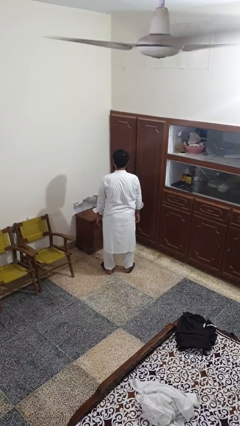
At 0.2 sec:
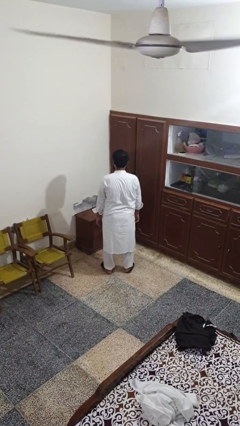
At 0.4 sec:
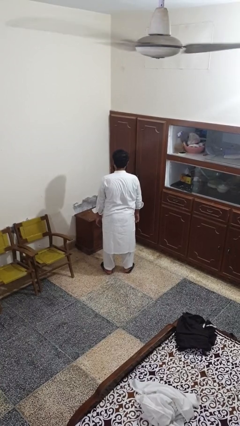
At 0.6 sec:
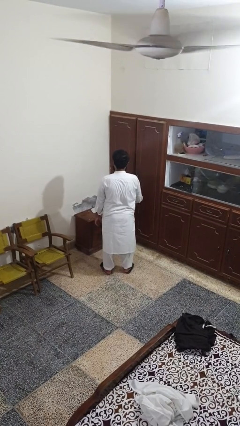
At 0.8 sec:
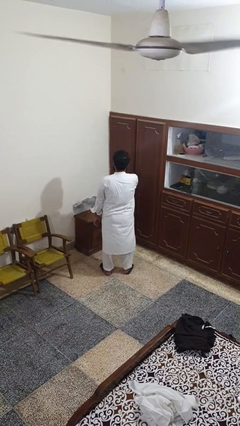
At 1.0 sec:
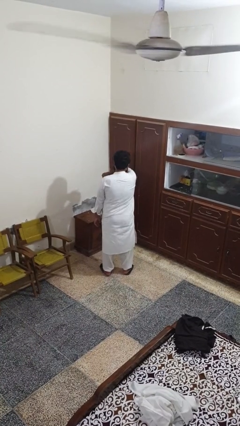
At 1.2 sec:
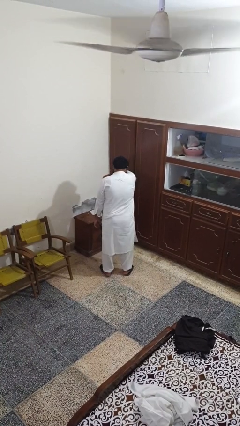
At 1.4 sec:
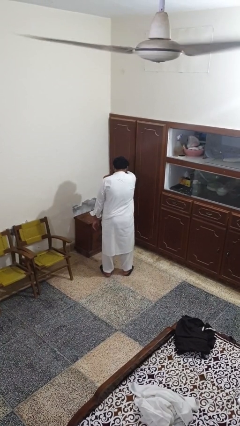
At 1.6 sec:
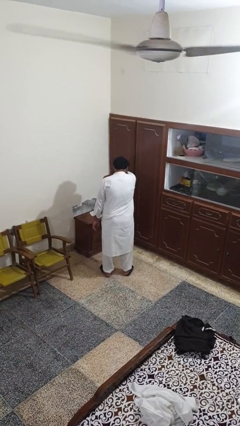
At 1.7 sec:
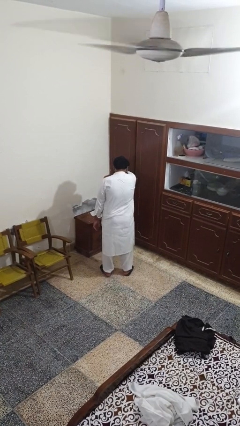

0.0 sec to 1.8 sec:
person sneezes into arm

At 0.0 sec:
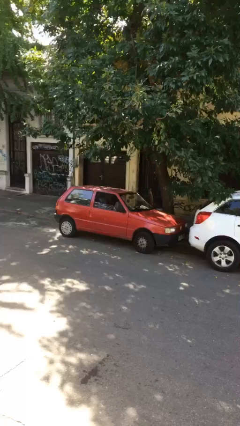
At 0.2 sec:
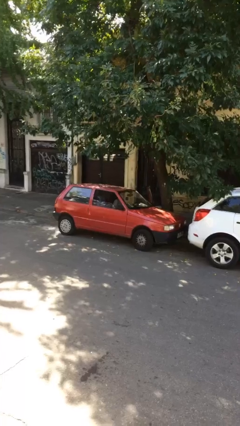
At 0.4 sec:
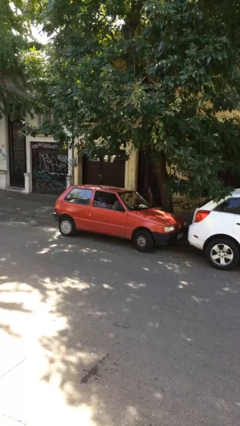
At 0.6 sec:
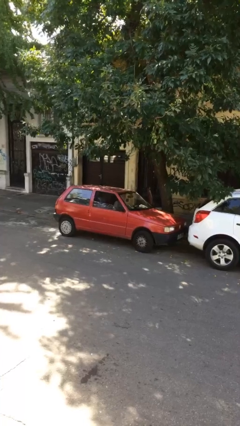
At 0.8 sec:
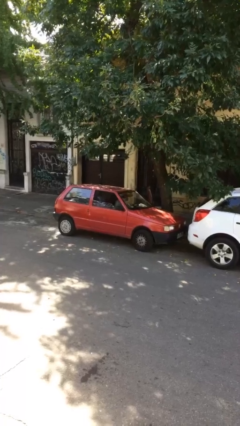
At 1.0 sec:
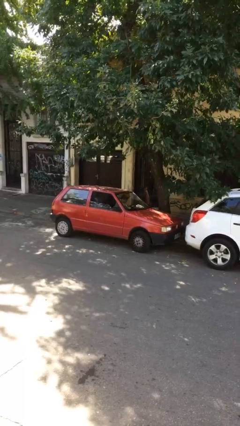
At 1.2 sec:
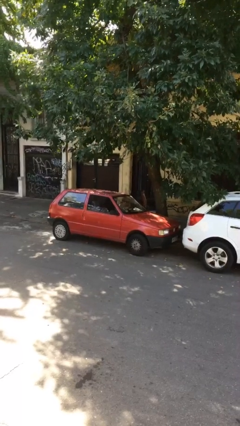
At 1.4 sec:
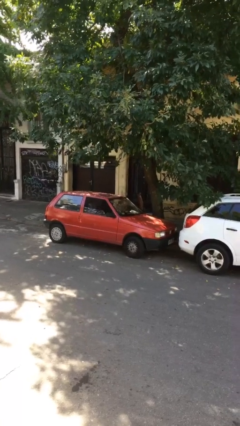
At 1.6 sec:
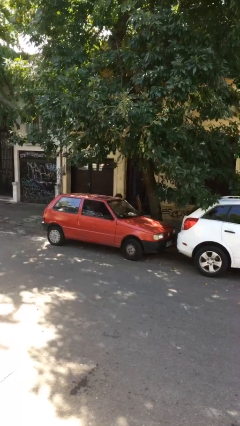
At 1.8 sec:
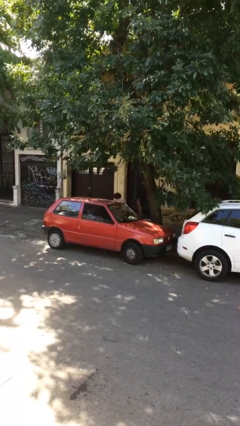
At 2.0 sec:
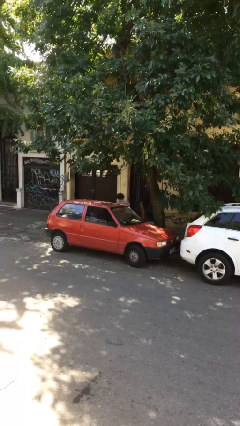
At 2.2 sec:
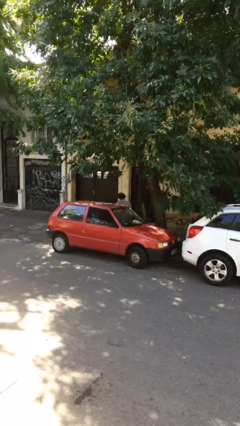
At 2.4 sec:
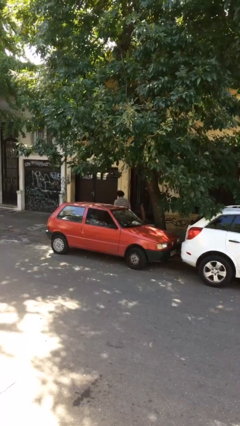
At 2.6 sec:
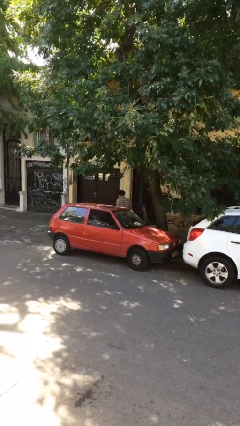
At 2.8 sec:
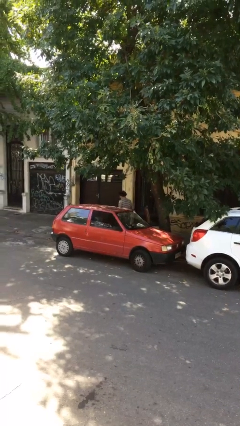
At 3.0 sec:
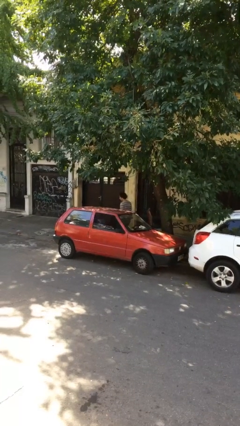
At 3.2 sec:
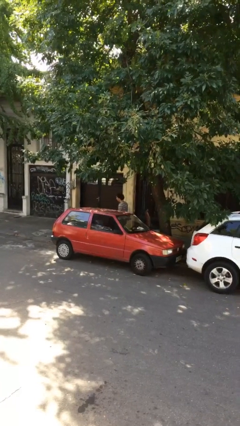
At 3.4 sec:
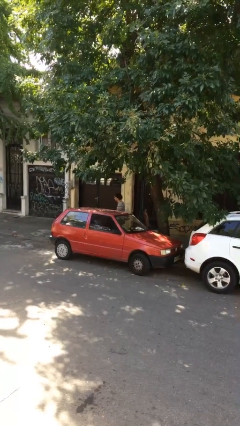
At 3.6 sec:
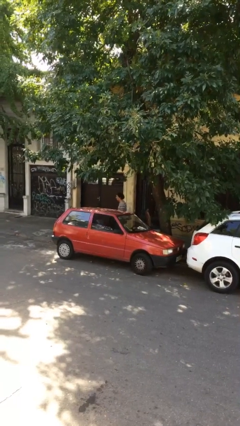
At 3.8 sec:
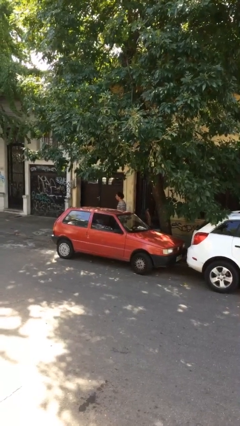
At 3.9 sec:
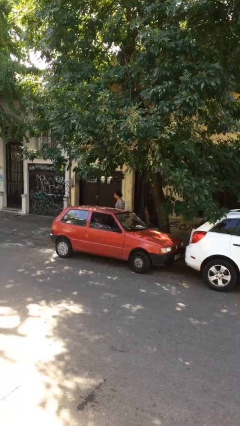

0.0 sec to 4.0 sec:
person exits car

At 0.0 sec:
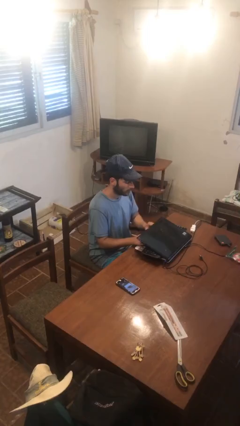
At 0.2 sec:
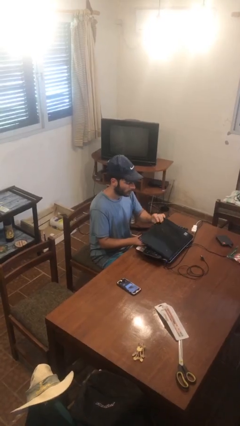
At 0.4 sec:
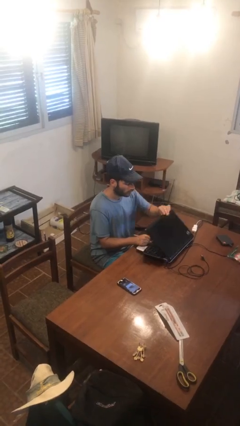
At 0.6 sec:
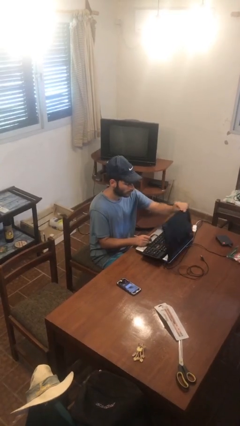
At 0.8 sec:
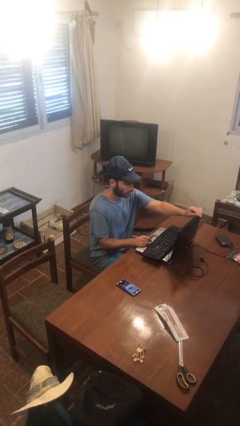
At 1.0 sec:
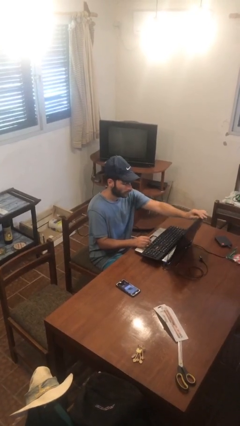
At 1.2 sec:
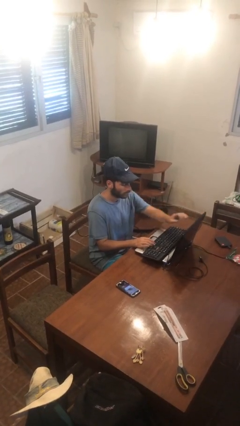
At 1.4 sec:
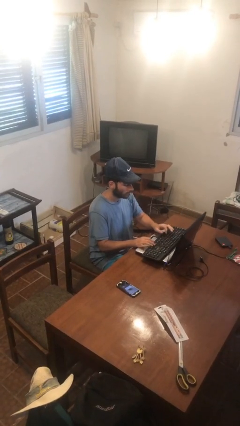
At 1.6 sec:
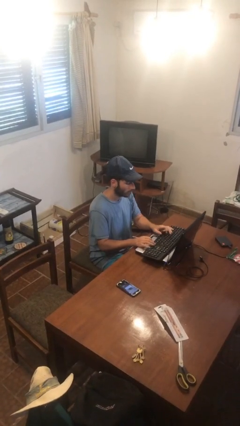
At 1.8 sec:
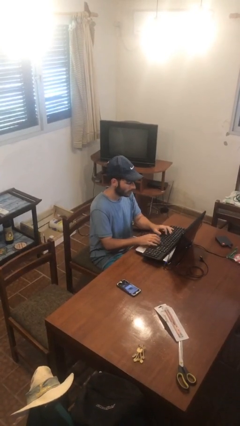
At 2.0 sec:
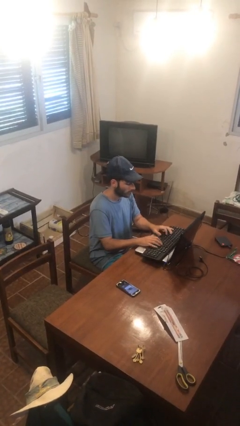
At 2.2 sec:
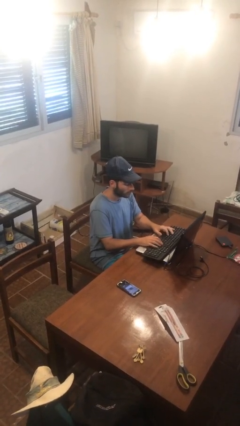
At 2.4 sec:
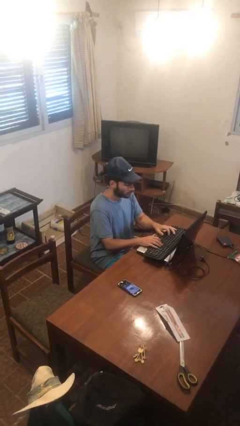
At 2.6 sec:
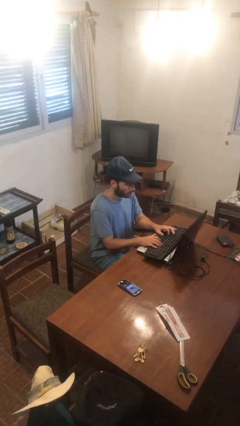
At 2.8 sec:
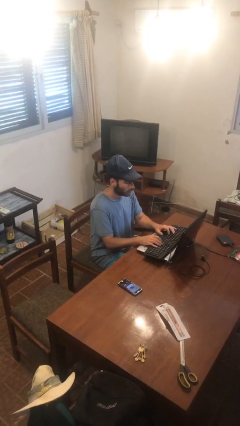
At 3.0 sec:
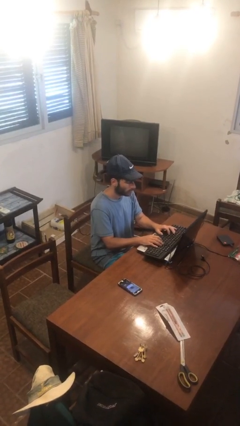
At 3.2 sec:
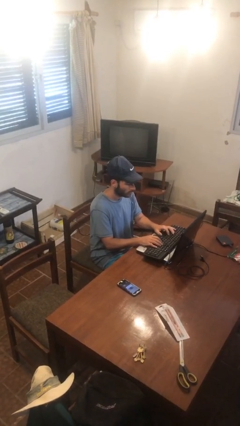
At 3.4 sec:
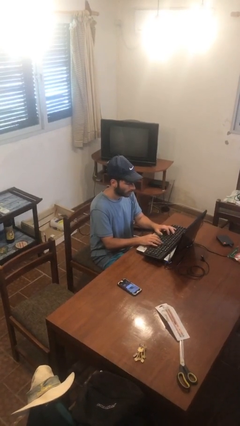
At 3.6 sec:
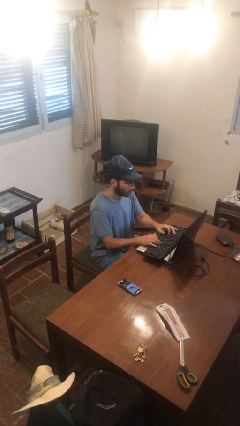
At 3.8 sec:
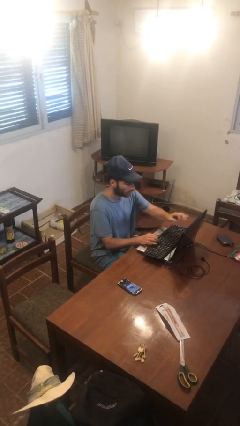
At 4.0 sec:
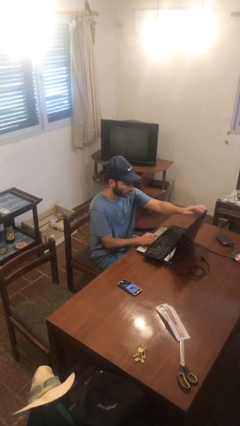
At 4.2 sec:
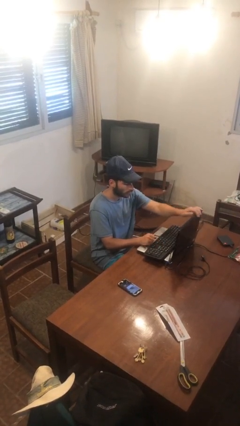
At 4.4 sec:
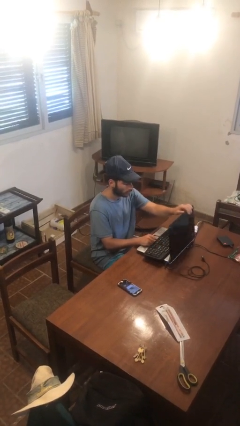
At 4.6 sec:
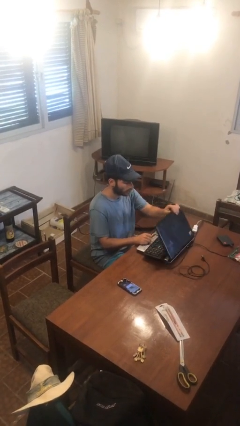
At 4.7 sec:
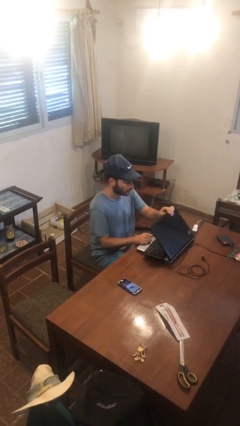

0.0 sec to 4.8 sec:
person interacts with laptop

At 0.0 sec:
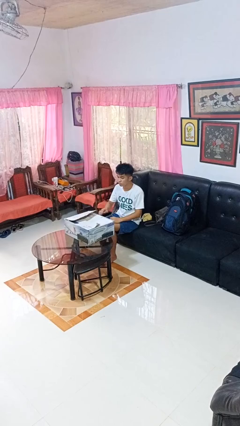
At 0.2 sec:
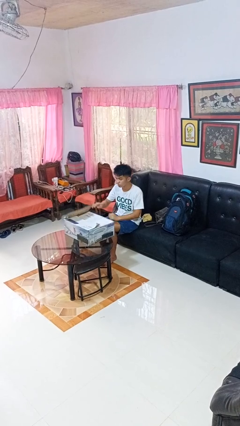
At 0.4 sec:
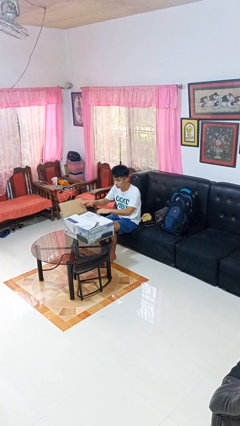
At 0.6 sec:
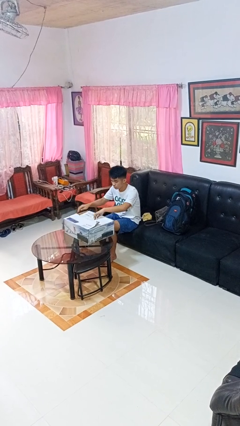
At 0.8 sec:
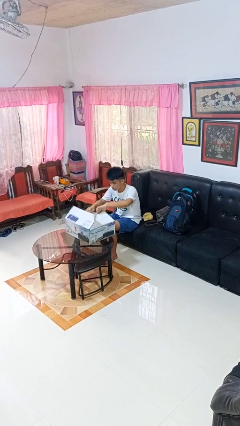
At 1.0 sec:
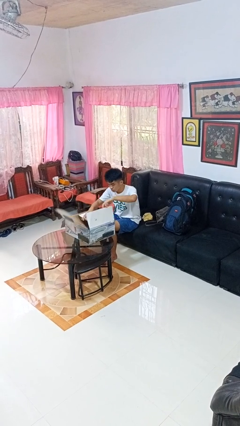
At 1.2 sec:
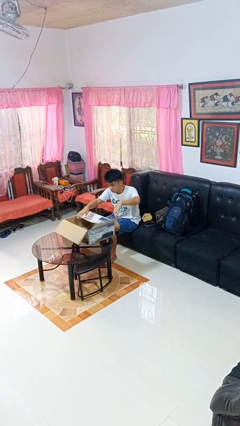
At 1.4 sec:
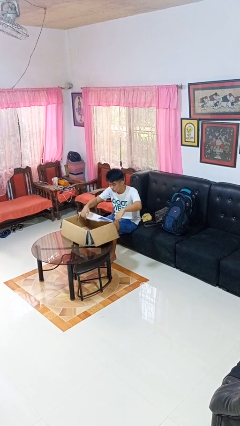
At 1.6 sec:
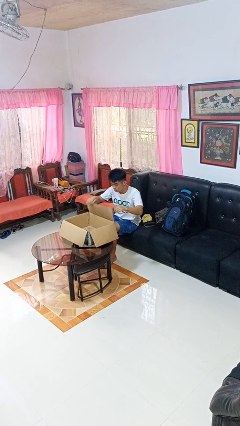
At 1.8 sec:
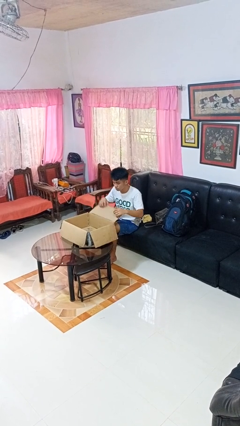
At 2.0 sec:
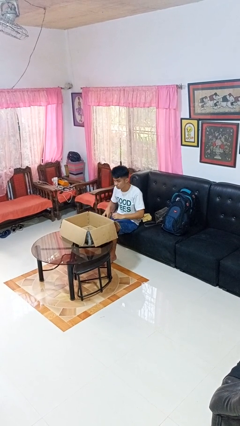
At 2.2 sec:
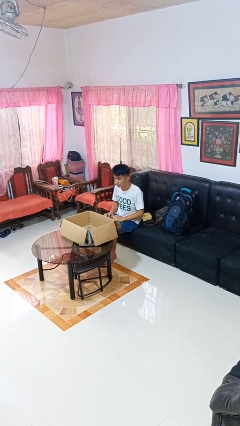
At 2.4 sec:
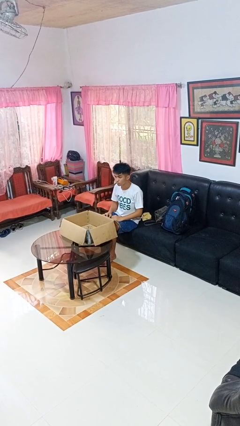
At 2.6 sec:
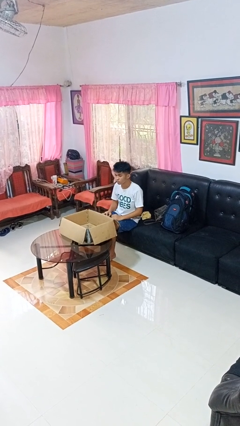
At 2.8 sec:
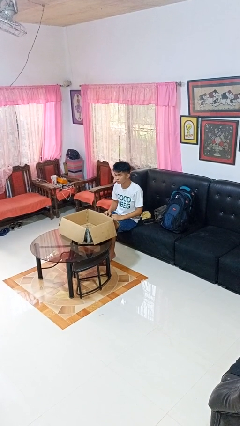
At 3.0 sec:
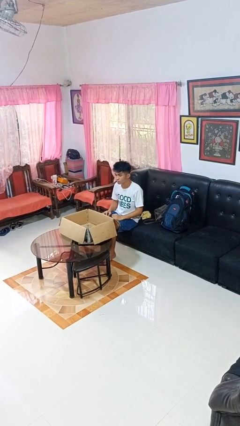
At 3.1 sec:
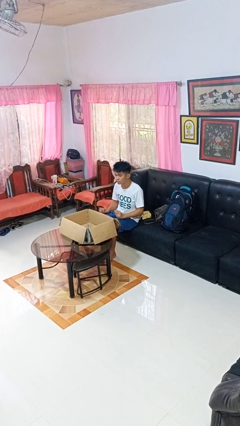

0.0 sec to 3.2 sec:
person opens box

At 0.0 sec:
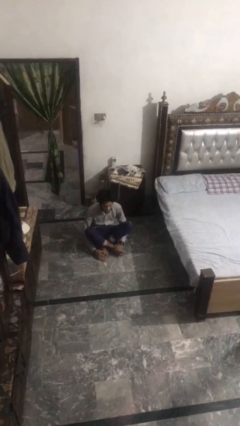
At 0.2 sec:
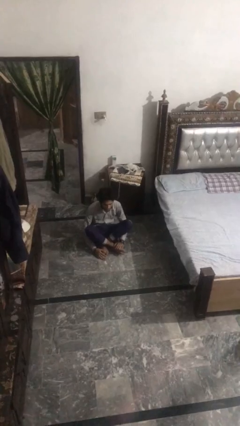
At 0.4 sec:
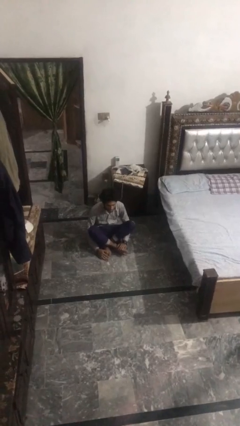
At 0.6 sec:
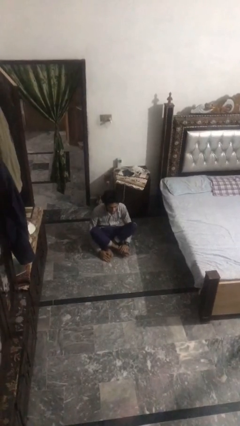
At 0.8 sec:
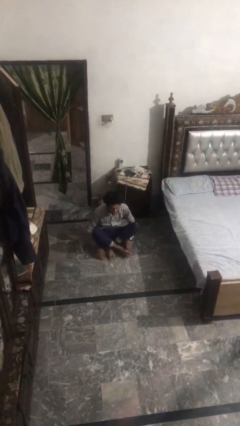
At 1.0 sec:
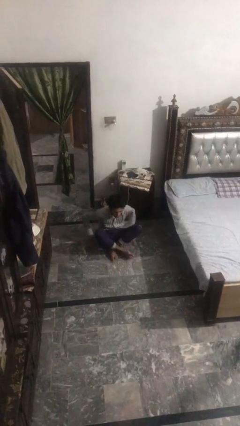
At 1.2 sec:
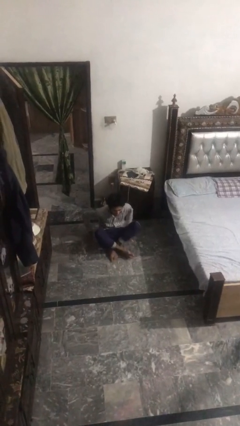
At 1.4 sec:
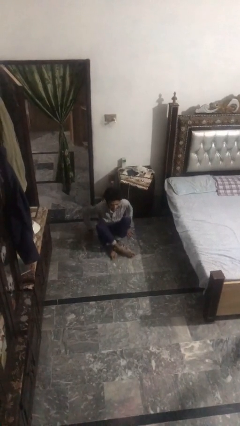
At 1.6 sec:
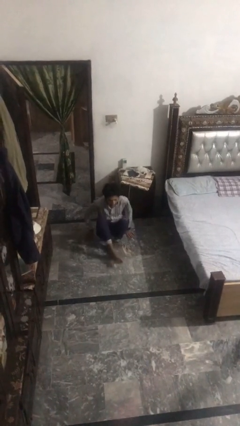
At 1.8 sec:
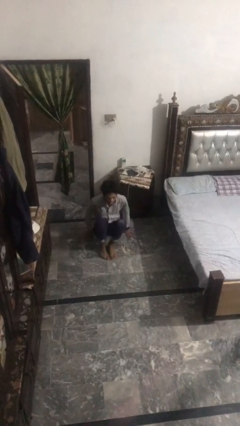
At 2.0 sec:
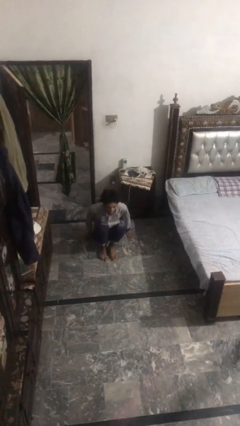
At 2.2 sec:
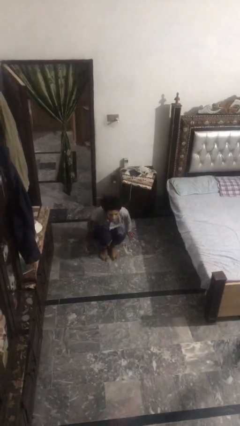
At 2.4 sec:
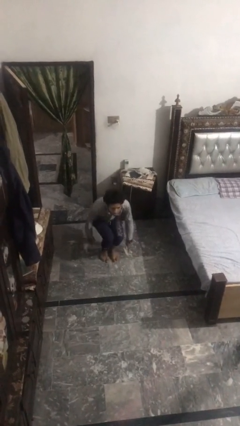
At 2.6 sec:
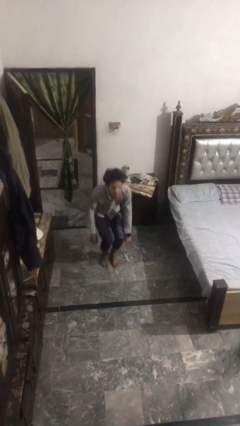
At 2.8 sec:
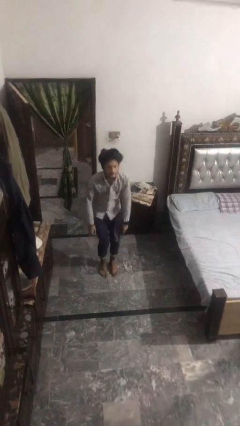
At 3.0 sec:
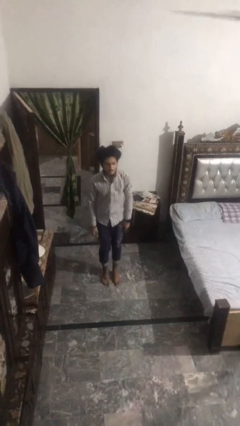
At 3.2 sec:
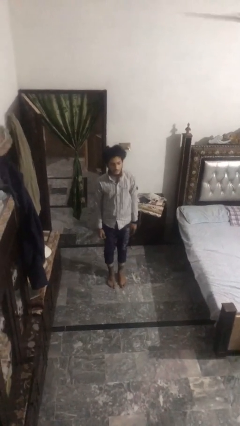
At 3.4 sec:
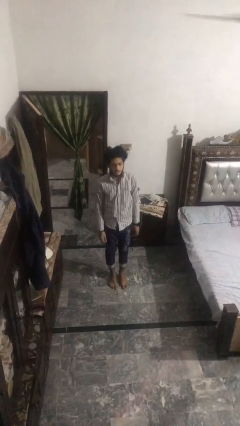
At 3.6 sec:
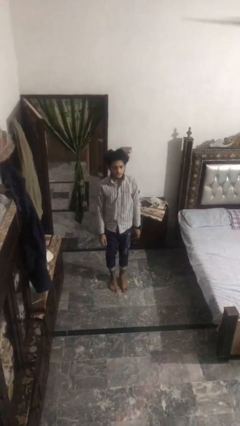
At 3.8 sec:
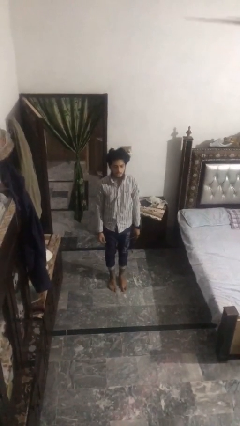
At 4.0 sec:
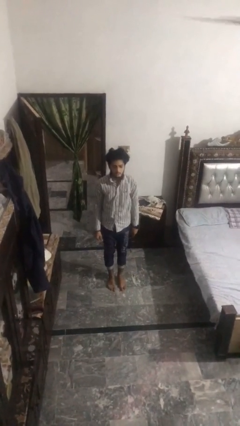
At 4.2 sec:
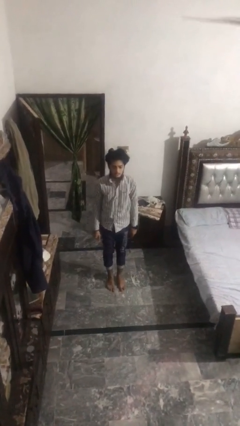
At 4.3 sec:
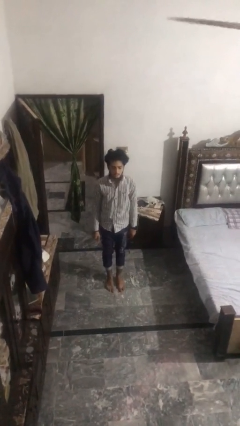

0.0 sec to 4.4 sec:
person stands up from floor
